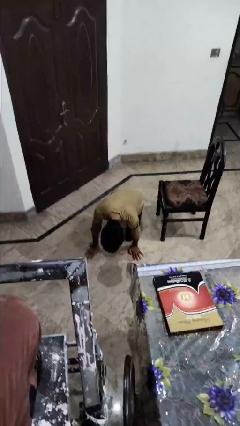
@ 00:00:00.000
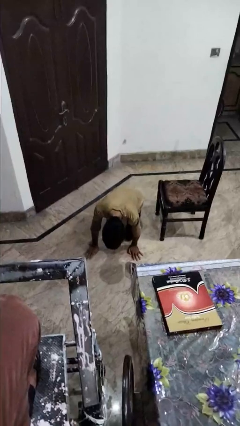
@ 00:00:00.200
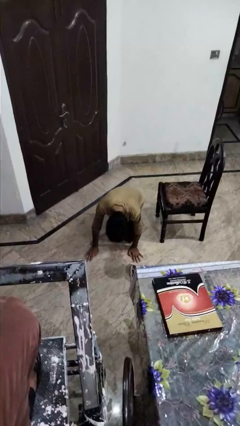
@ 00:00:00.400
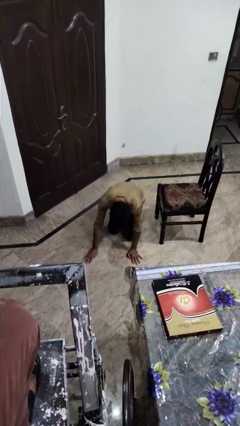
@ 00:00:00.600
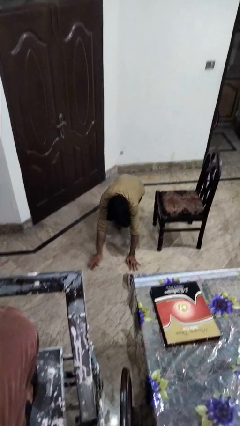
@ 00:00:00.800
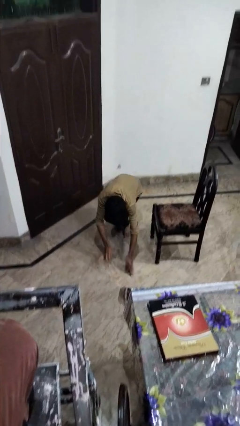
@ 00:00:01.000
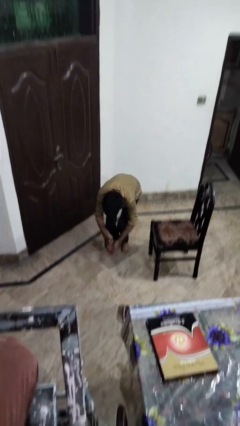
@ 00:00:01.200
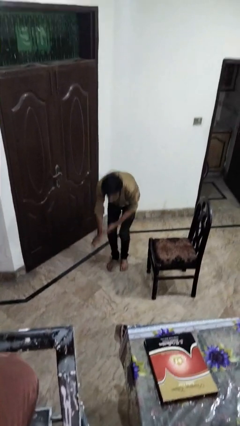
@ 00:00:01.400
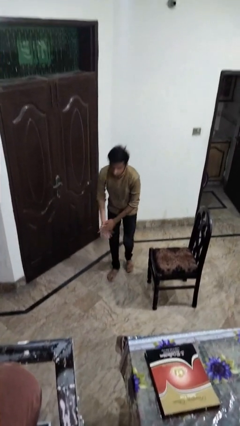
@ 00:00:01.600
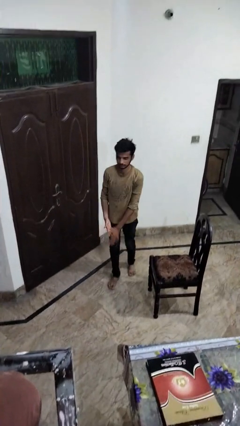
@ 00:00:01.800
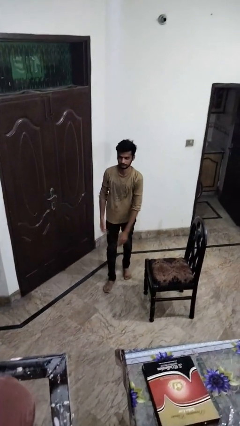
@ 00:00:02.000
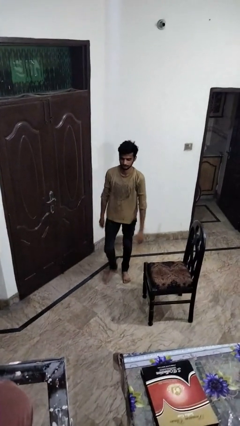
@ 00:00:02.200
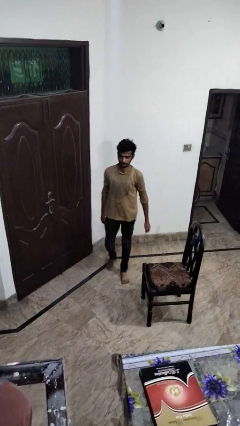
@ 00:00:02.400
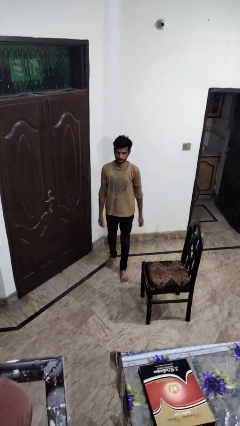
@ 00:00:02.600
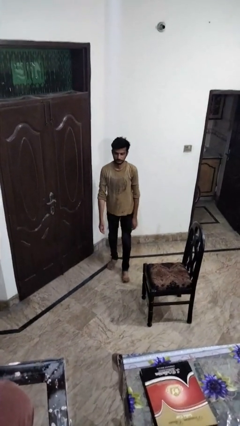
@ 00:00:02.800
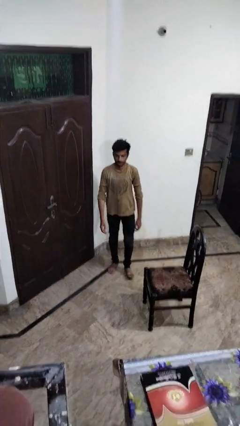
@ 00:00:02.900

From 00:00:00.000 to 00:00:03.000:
person stands up from floor

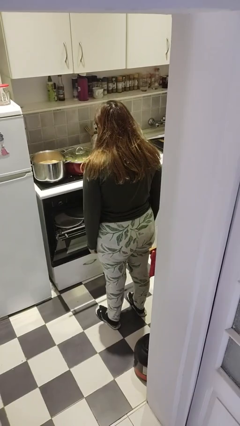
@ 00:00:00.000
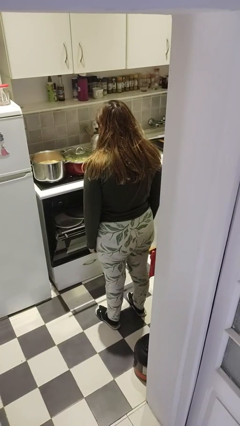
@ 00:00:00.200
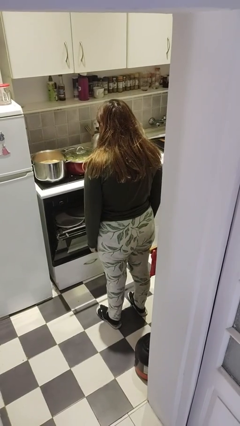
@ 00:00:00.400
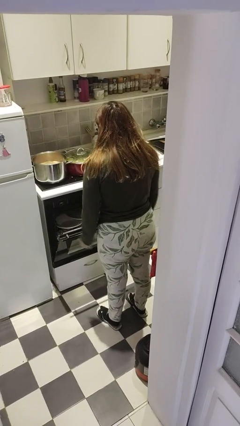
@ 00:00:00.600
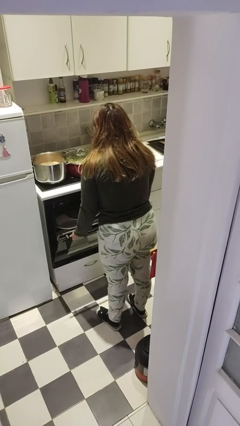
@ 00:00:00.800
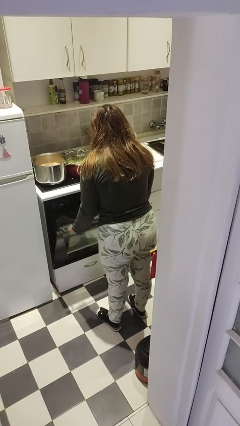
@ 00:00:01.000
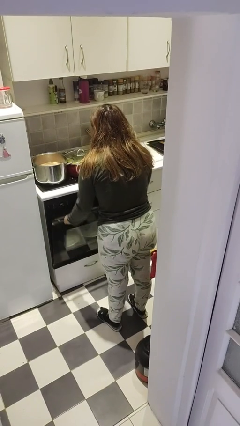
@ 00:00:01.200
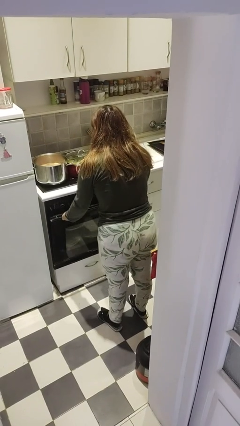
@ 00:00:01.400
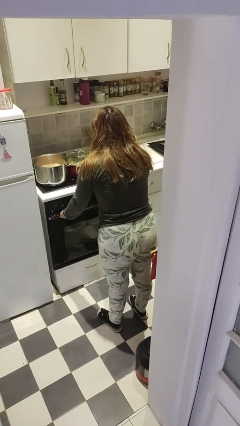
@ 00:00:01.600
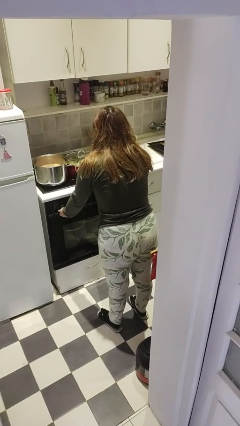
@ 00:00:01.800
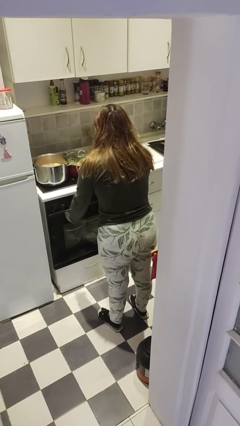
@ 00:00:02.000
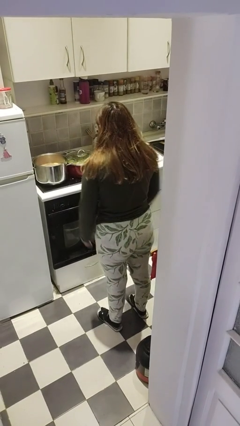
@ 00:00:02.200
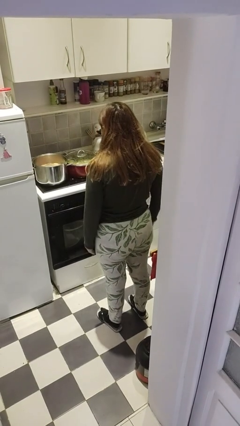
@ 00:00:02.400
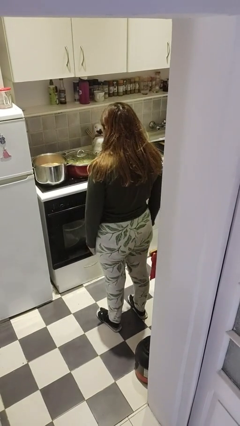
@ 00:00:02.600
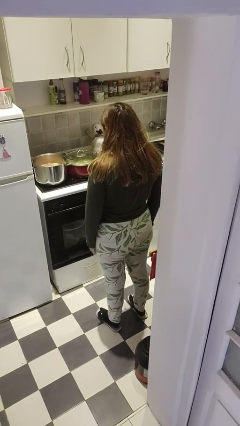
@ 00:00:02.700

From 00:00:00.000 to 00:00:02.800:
person closes dishwasher

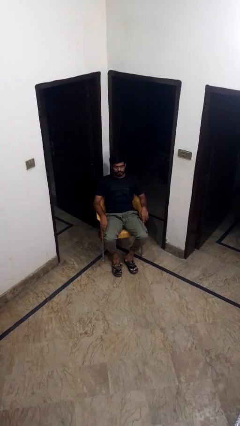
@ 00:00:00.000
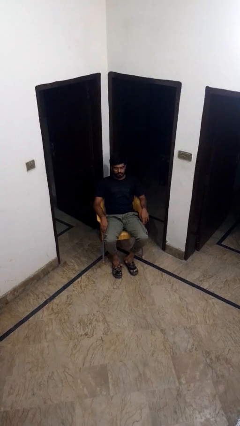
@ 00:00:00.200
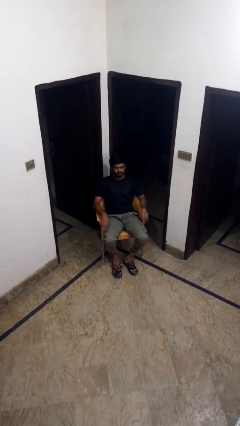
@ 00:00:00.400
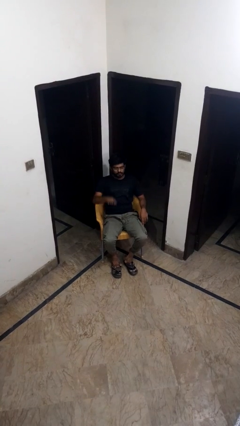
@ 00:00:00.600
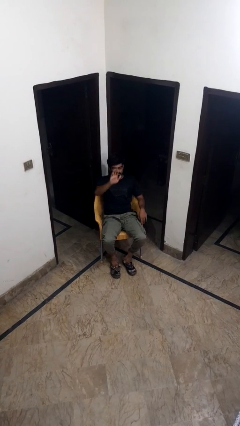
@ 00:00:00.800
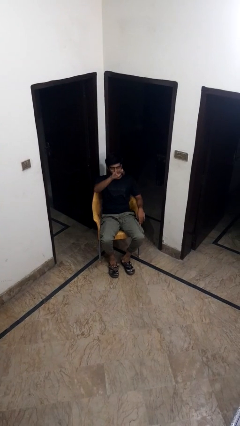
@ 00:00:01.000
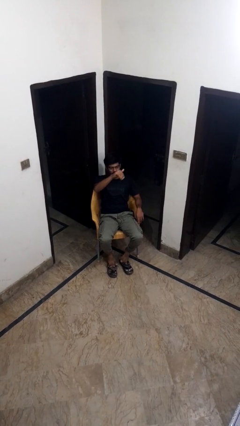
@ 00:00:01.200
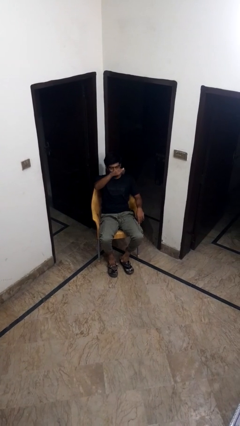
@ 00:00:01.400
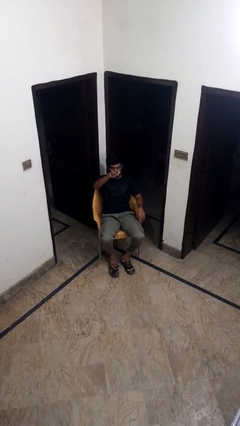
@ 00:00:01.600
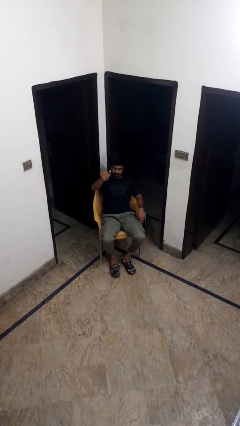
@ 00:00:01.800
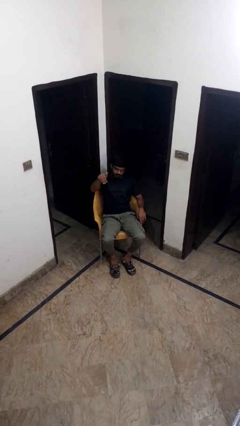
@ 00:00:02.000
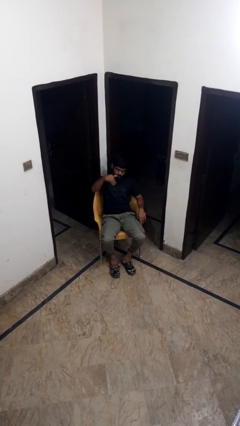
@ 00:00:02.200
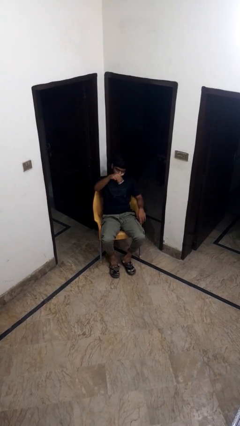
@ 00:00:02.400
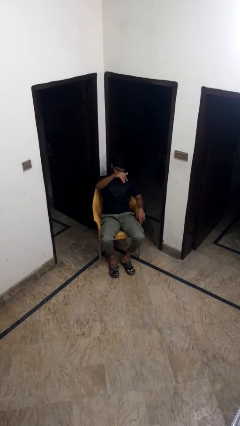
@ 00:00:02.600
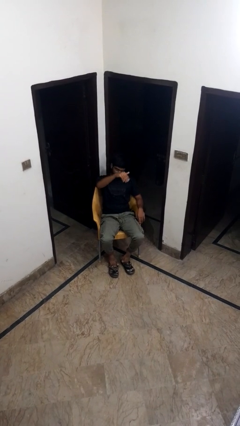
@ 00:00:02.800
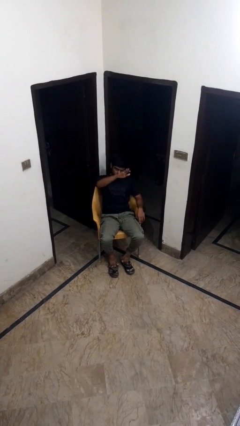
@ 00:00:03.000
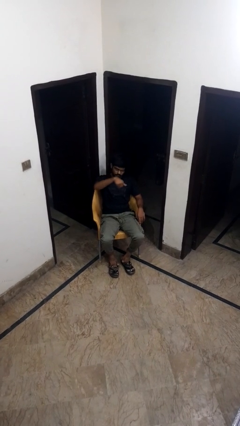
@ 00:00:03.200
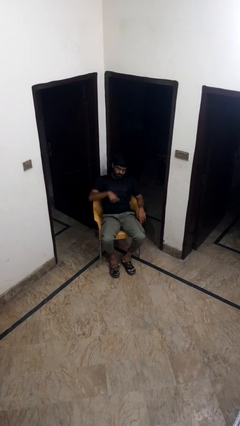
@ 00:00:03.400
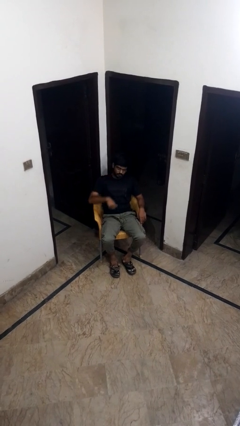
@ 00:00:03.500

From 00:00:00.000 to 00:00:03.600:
person gestures come here

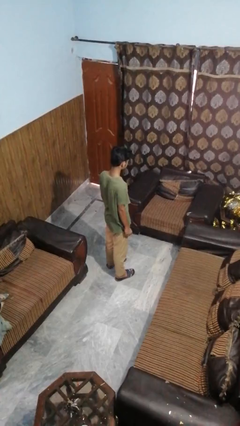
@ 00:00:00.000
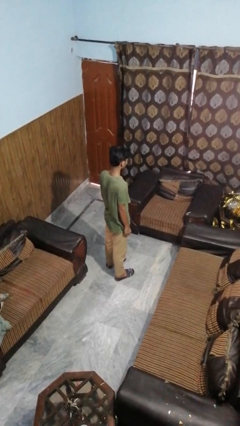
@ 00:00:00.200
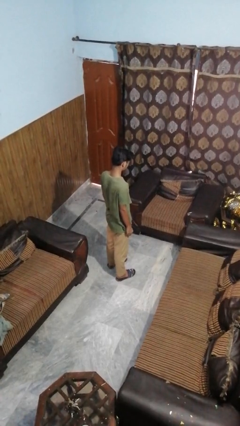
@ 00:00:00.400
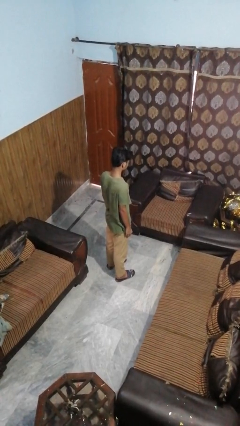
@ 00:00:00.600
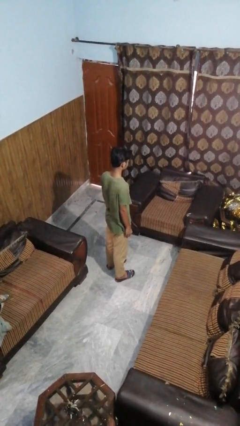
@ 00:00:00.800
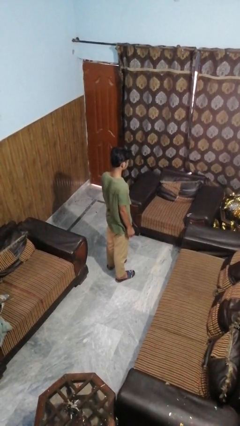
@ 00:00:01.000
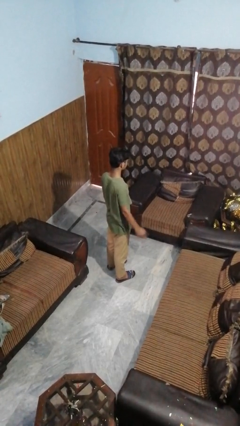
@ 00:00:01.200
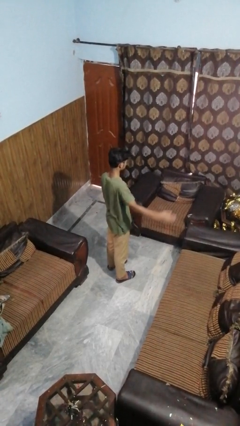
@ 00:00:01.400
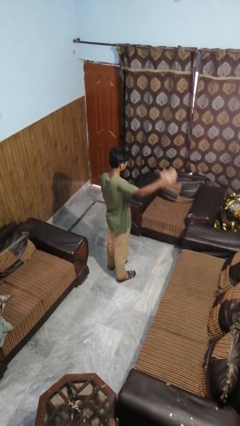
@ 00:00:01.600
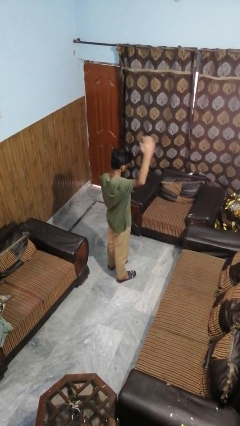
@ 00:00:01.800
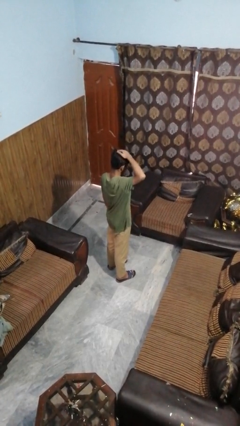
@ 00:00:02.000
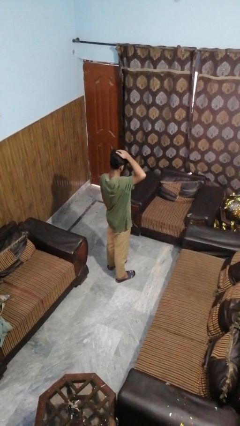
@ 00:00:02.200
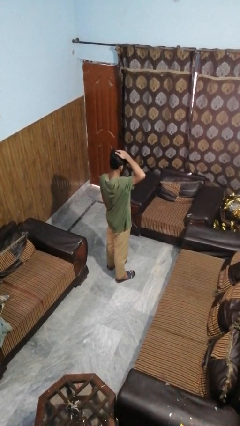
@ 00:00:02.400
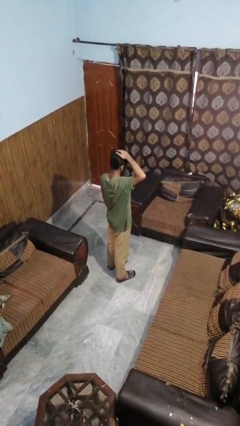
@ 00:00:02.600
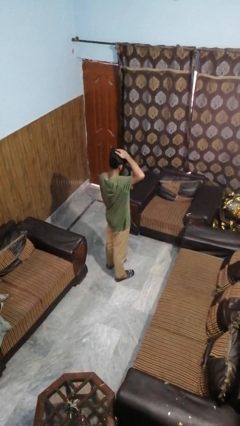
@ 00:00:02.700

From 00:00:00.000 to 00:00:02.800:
person pats head

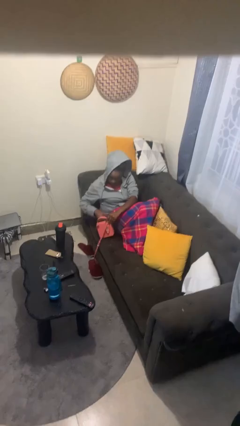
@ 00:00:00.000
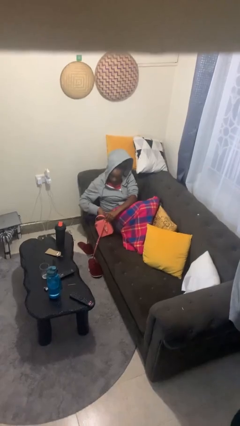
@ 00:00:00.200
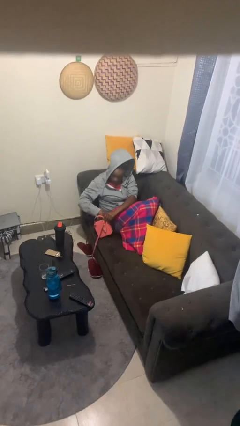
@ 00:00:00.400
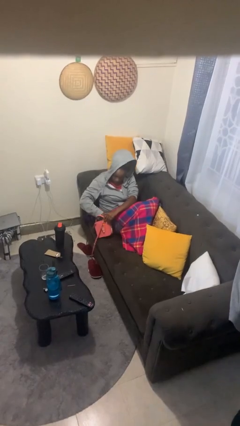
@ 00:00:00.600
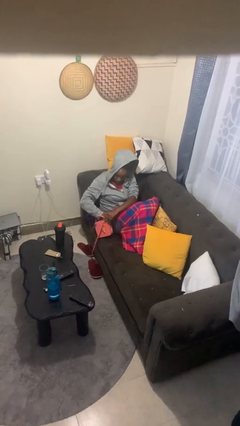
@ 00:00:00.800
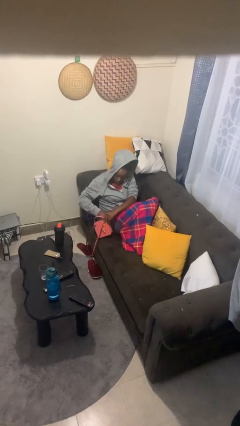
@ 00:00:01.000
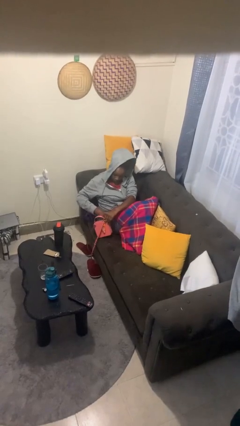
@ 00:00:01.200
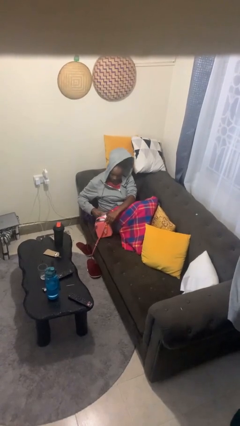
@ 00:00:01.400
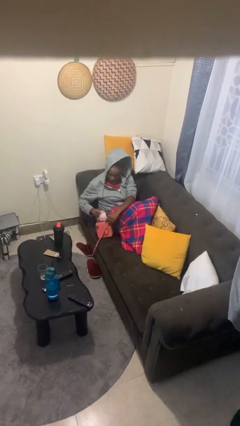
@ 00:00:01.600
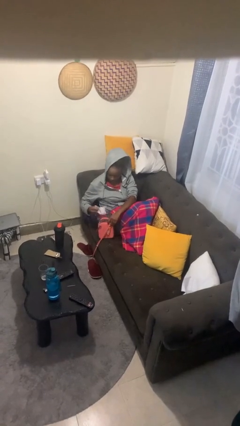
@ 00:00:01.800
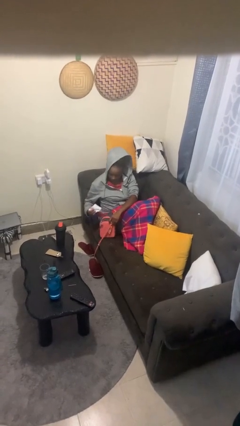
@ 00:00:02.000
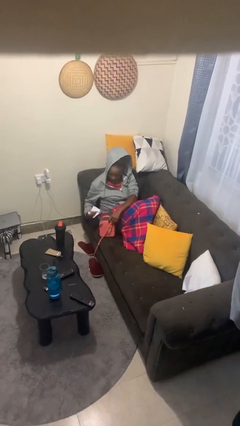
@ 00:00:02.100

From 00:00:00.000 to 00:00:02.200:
person takes object from purse

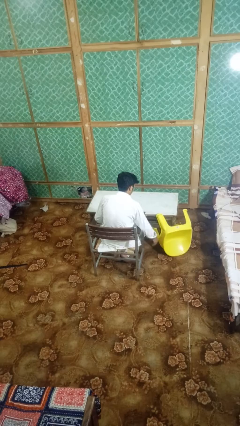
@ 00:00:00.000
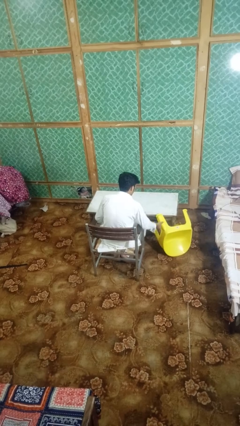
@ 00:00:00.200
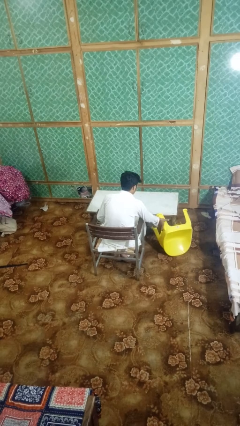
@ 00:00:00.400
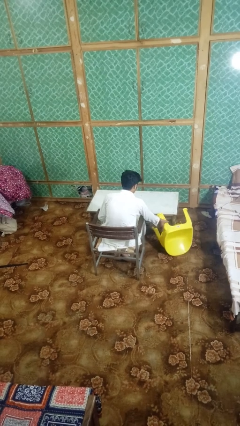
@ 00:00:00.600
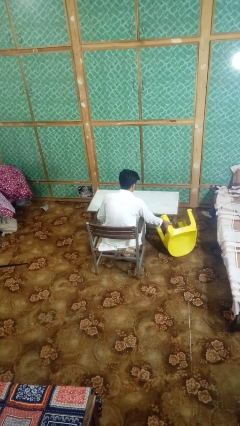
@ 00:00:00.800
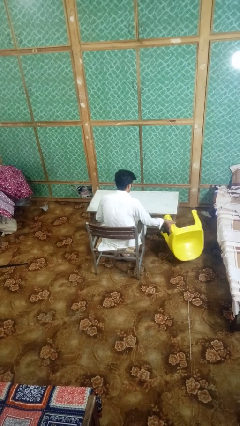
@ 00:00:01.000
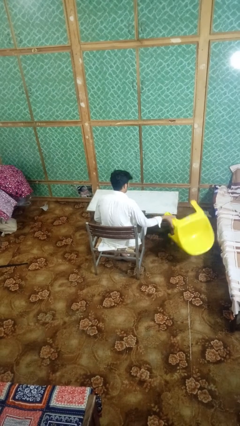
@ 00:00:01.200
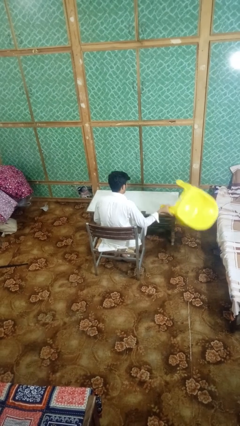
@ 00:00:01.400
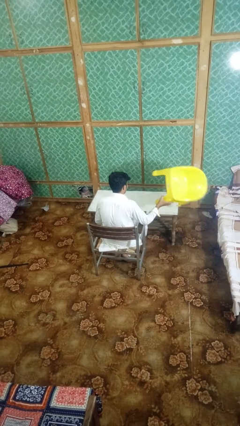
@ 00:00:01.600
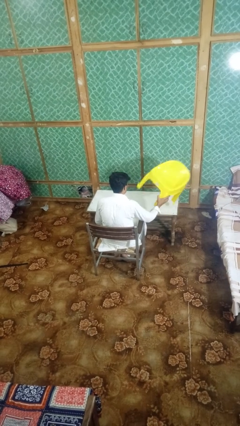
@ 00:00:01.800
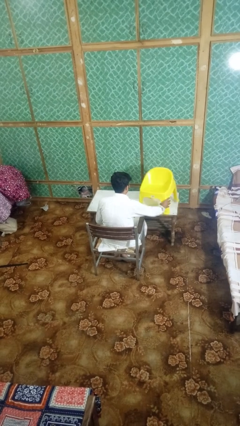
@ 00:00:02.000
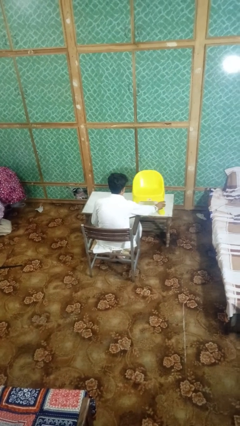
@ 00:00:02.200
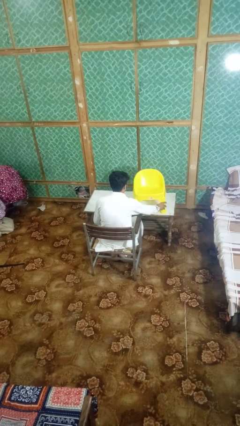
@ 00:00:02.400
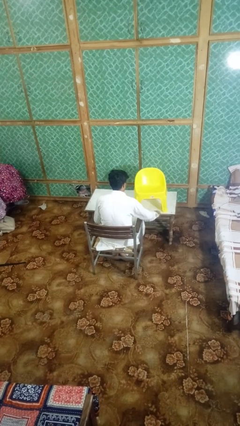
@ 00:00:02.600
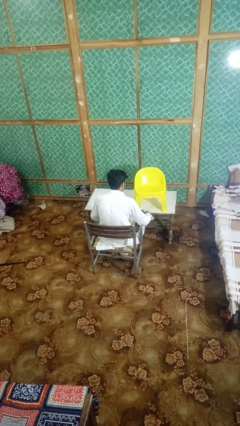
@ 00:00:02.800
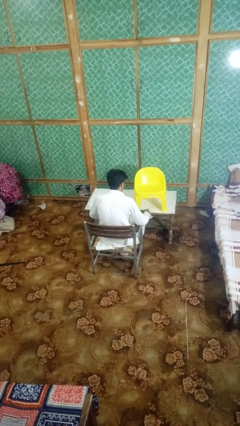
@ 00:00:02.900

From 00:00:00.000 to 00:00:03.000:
person sets upright furniture
